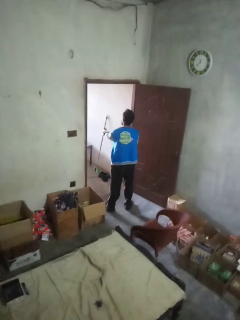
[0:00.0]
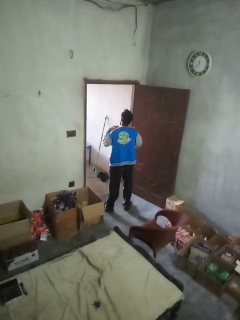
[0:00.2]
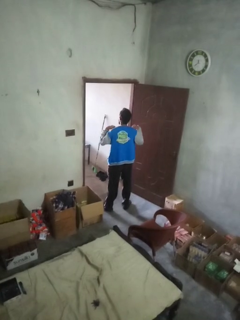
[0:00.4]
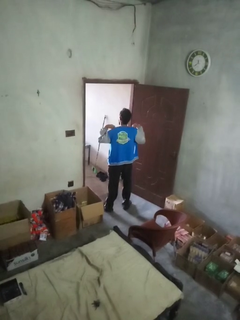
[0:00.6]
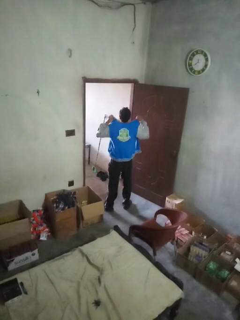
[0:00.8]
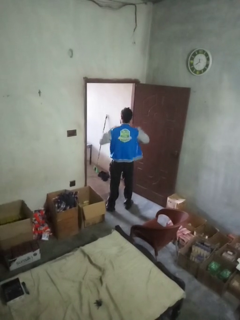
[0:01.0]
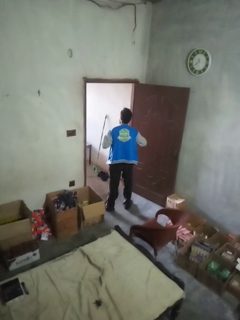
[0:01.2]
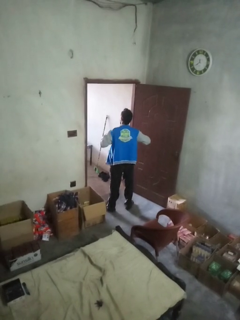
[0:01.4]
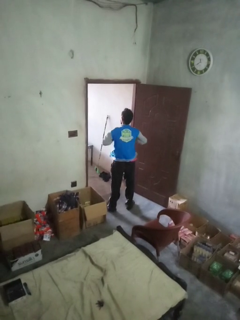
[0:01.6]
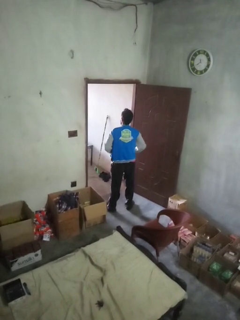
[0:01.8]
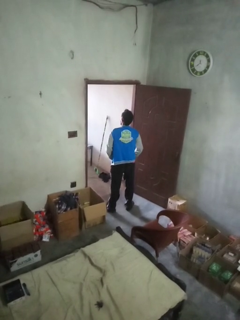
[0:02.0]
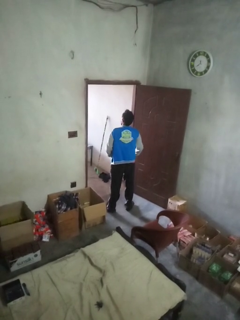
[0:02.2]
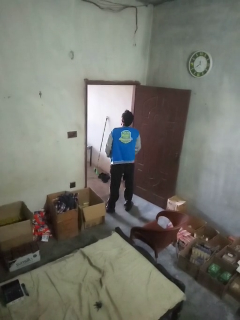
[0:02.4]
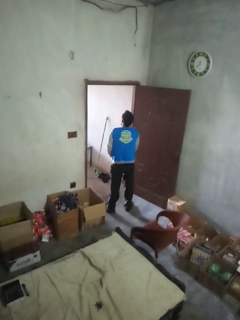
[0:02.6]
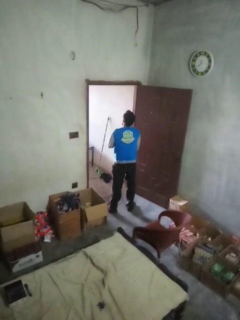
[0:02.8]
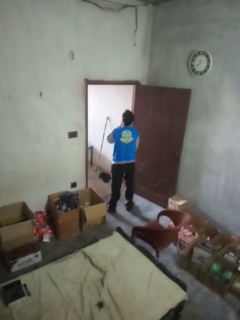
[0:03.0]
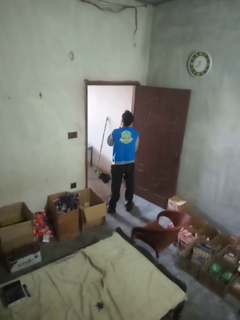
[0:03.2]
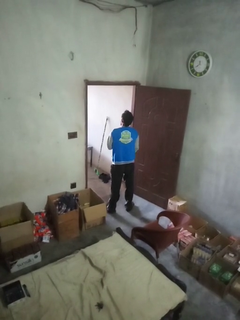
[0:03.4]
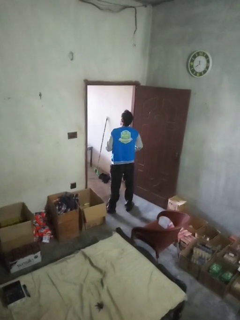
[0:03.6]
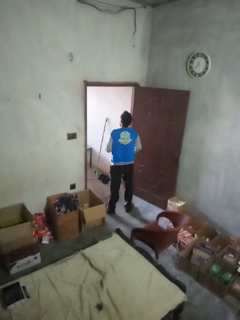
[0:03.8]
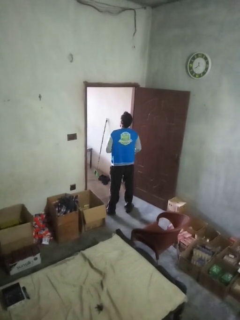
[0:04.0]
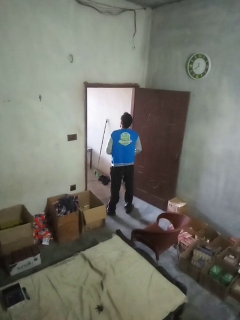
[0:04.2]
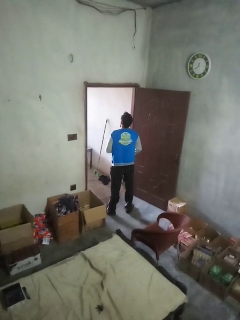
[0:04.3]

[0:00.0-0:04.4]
person zips up jacket

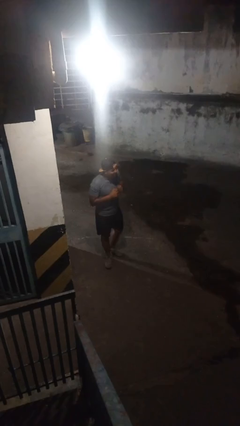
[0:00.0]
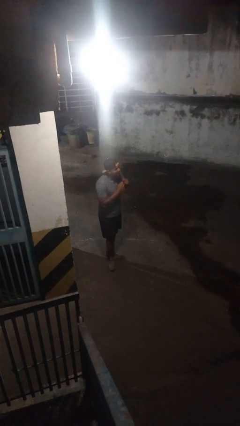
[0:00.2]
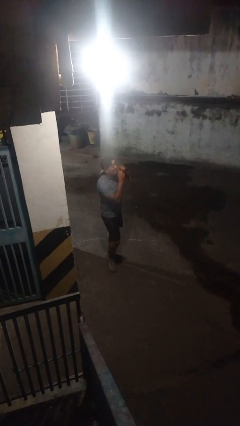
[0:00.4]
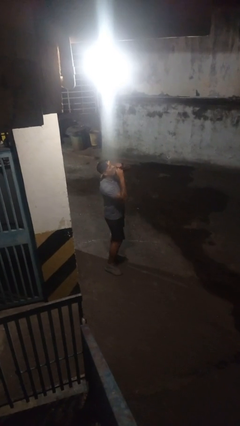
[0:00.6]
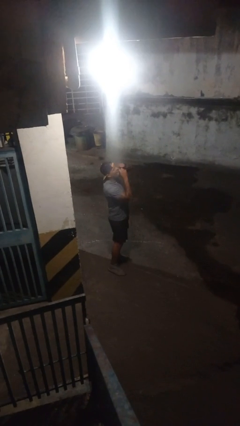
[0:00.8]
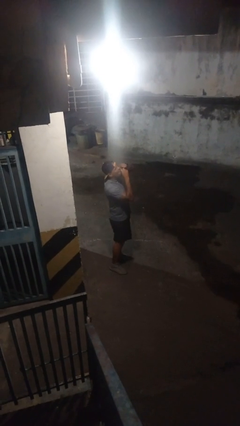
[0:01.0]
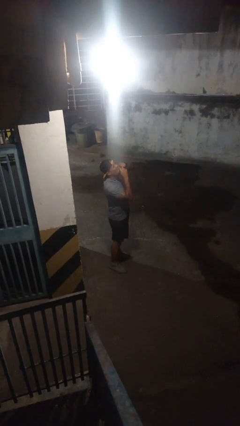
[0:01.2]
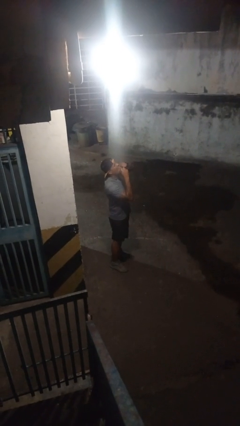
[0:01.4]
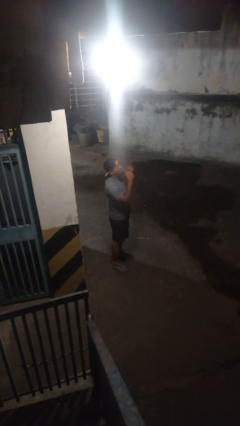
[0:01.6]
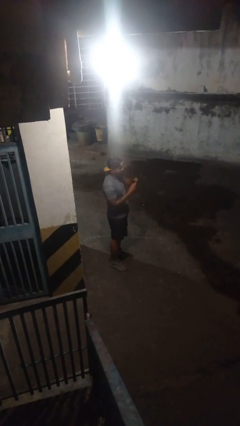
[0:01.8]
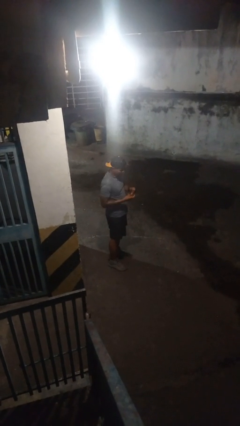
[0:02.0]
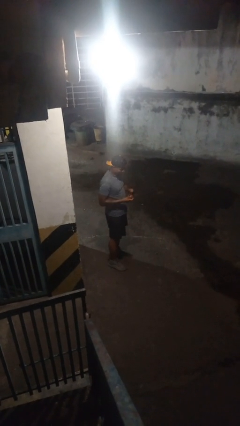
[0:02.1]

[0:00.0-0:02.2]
person flosses

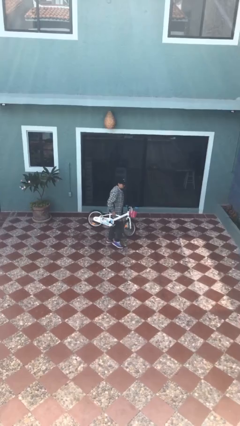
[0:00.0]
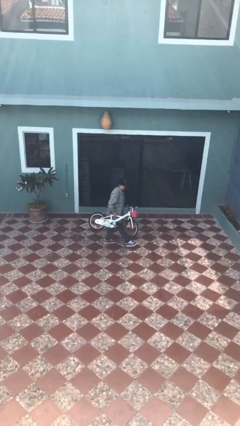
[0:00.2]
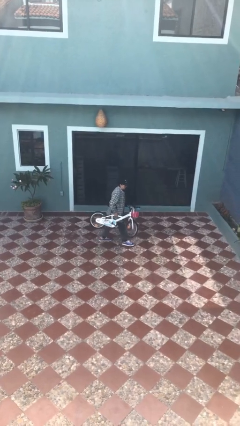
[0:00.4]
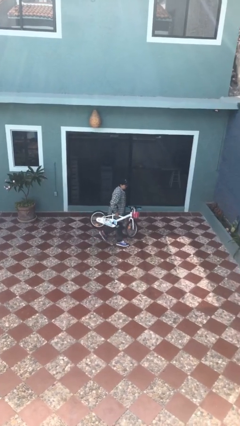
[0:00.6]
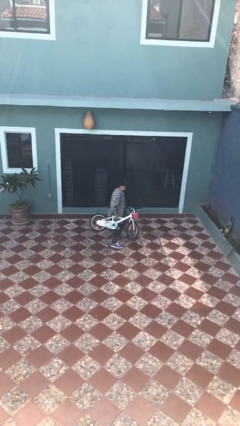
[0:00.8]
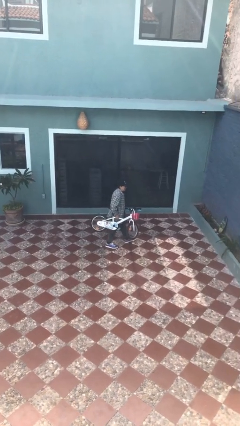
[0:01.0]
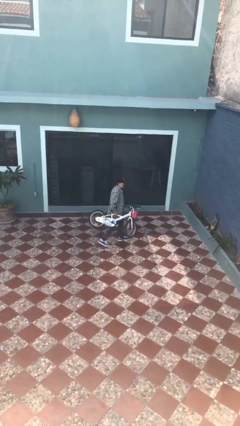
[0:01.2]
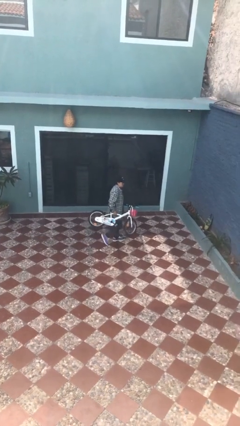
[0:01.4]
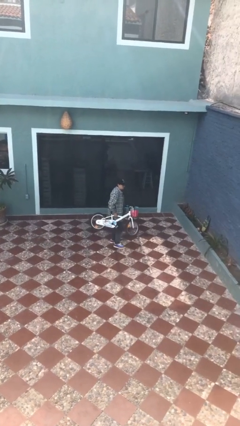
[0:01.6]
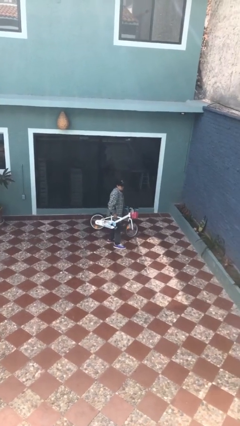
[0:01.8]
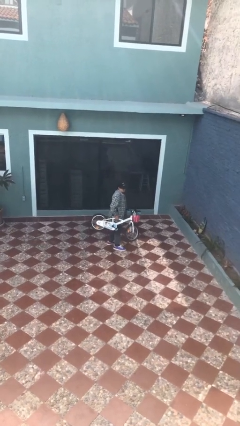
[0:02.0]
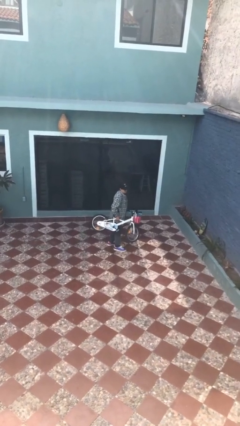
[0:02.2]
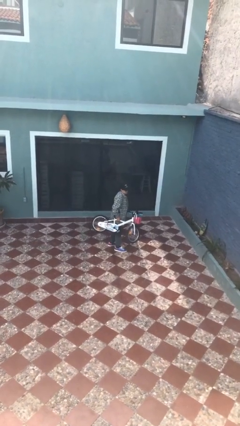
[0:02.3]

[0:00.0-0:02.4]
person carries bicycle

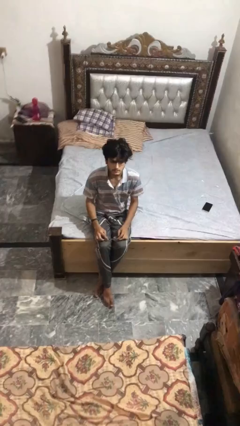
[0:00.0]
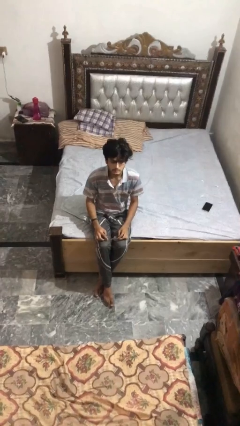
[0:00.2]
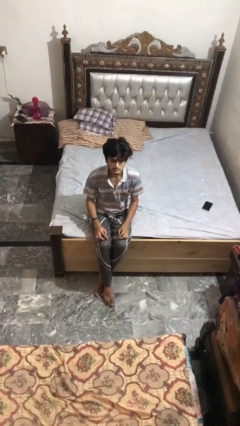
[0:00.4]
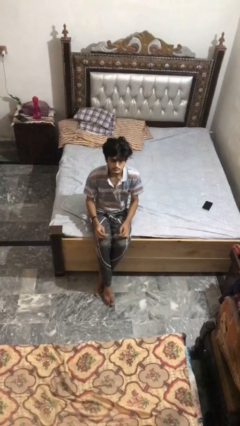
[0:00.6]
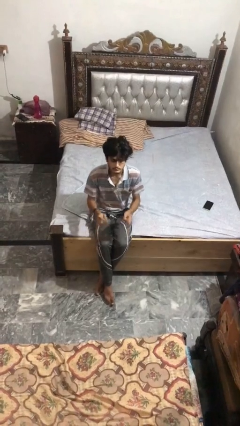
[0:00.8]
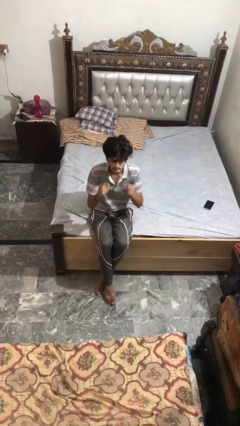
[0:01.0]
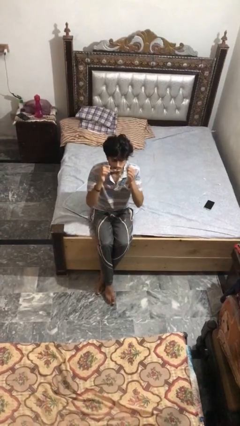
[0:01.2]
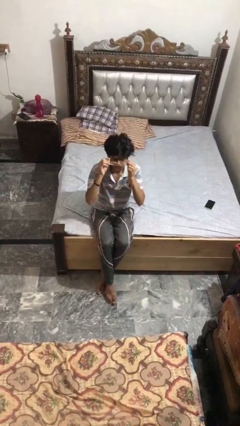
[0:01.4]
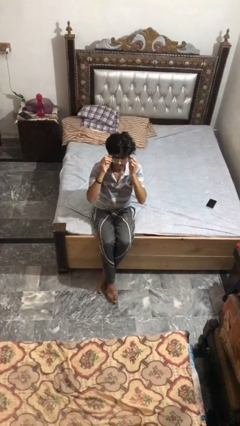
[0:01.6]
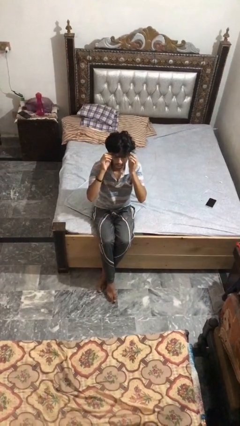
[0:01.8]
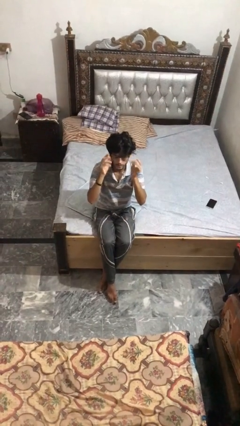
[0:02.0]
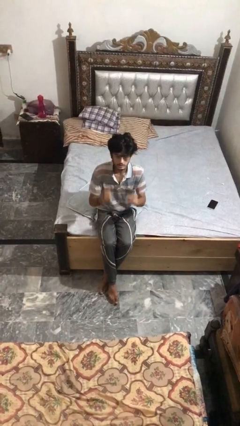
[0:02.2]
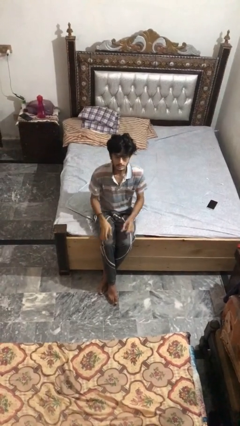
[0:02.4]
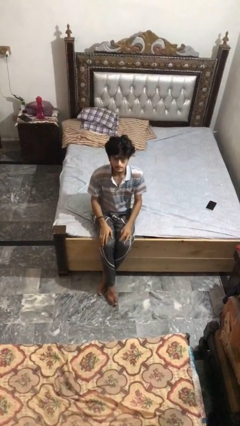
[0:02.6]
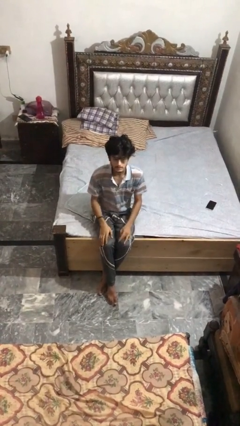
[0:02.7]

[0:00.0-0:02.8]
person puts on glasses

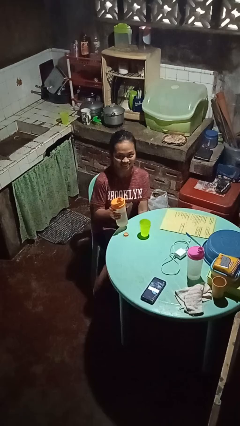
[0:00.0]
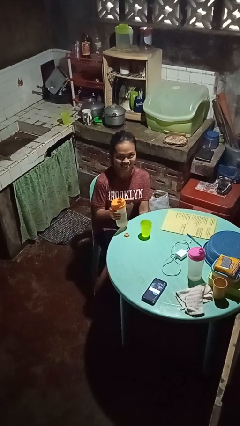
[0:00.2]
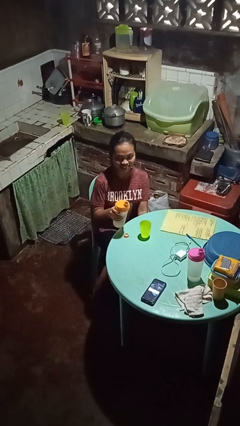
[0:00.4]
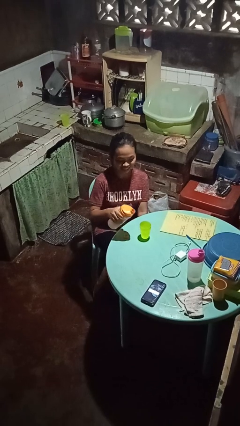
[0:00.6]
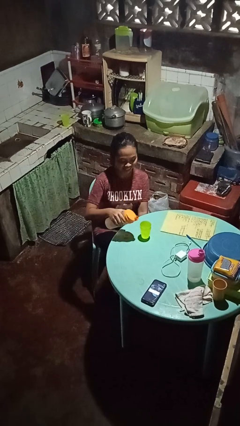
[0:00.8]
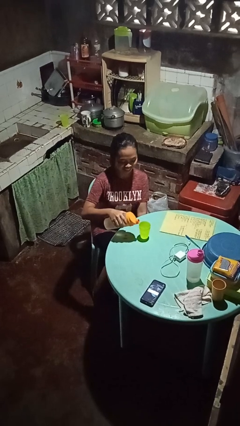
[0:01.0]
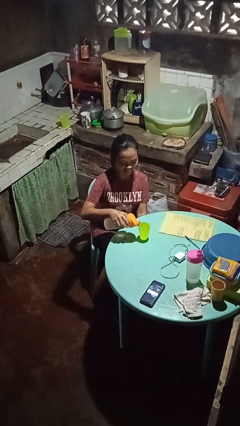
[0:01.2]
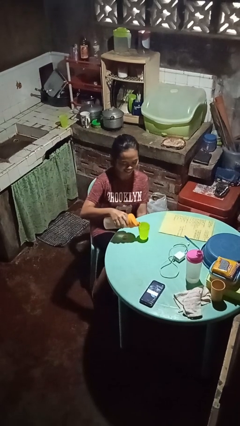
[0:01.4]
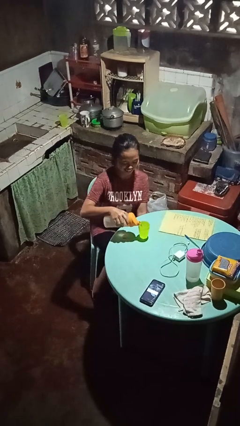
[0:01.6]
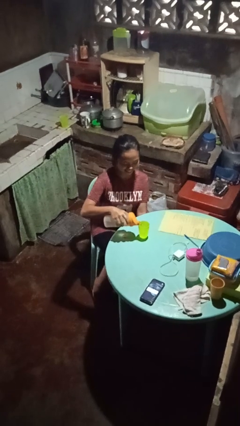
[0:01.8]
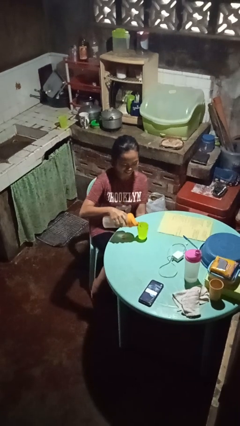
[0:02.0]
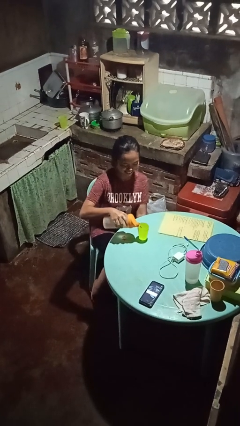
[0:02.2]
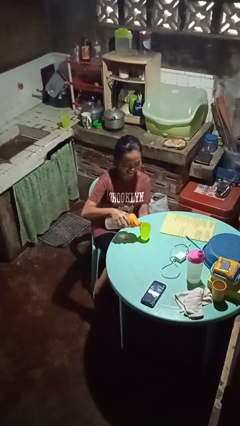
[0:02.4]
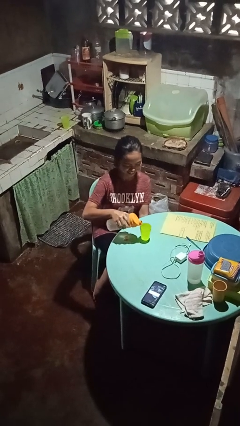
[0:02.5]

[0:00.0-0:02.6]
person pours liquid into cup

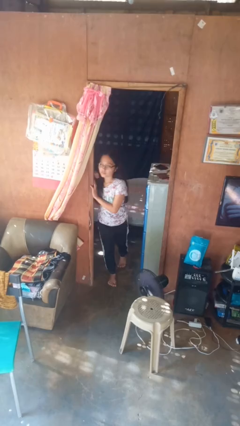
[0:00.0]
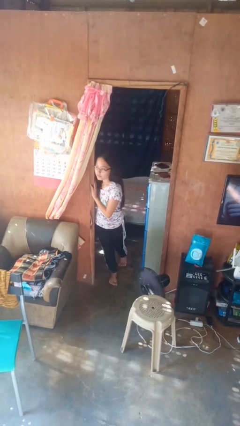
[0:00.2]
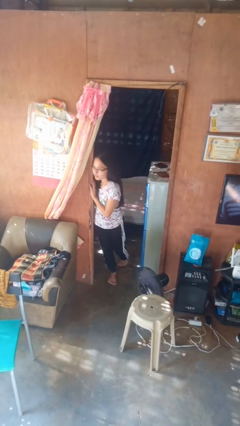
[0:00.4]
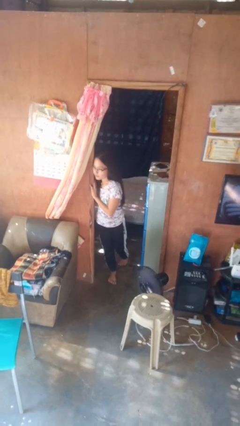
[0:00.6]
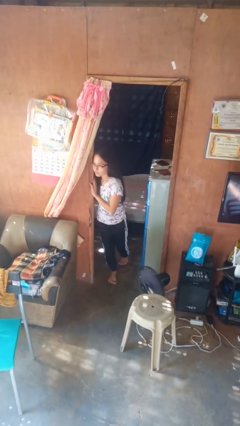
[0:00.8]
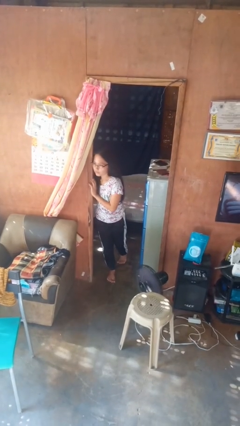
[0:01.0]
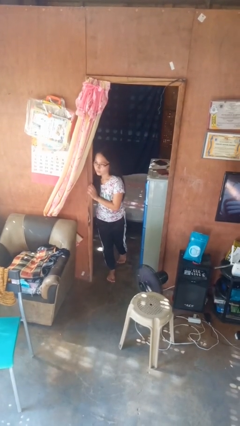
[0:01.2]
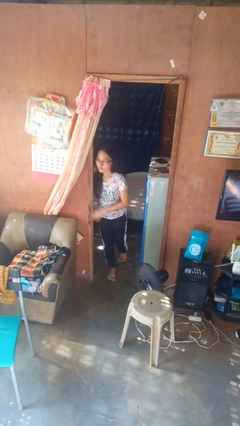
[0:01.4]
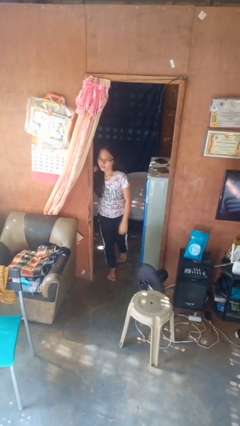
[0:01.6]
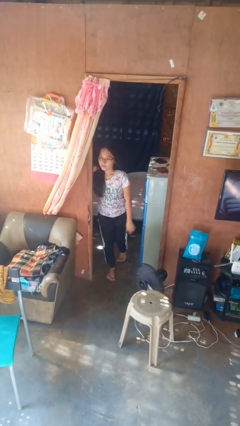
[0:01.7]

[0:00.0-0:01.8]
person bumps into wall

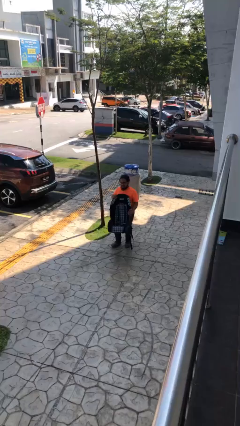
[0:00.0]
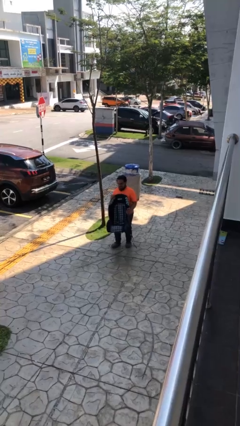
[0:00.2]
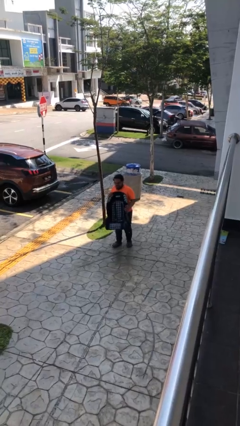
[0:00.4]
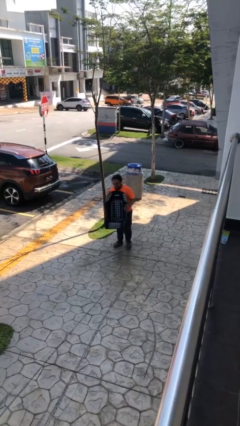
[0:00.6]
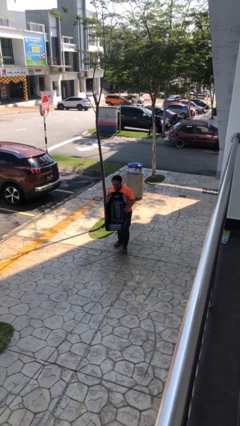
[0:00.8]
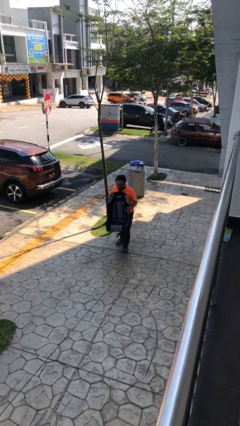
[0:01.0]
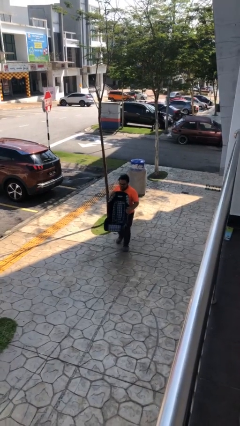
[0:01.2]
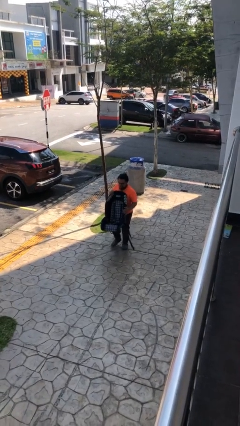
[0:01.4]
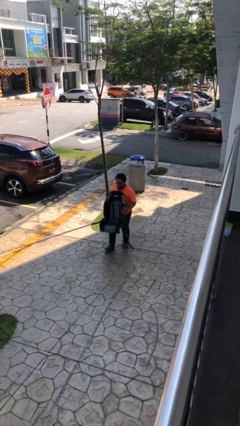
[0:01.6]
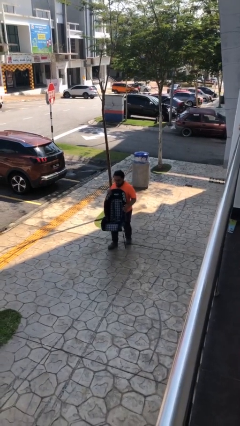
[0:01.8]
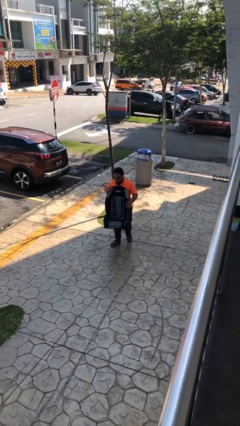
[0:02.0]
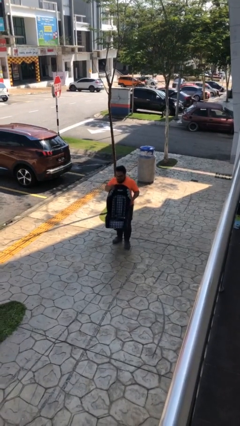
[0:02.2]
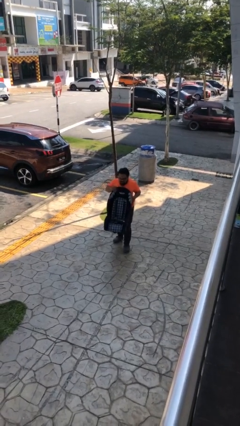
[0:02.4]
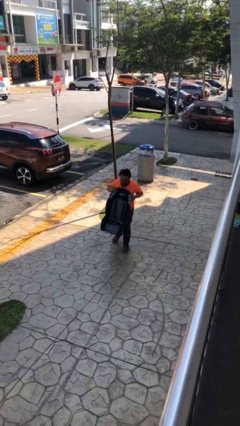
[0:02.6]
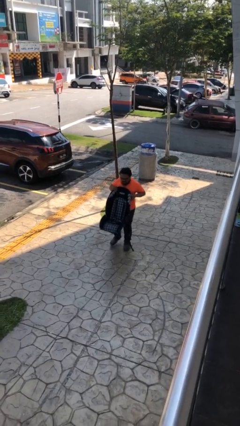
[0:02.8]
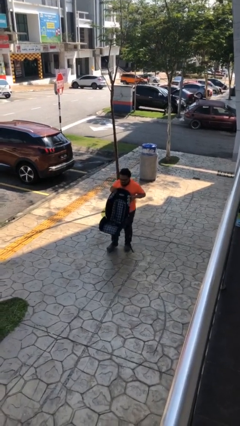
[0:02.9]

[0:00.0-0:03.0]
person carries heavy object
